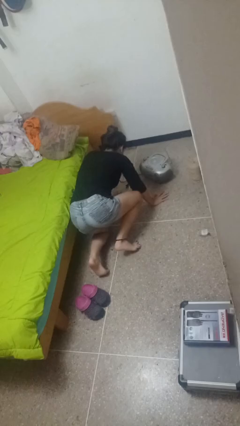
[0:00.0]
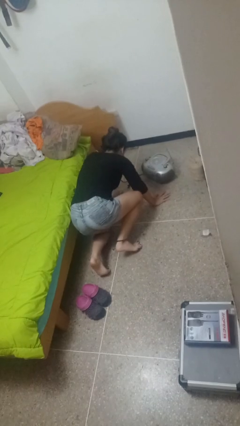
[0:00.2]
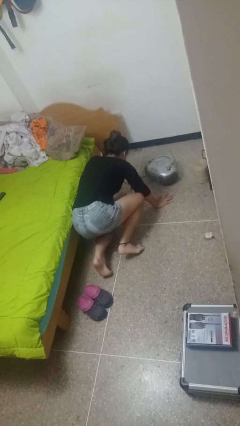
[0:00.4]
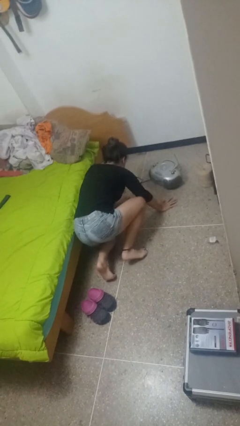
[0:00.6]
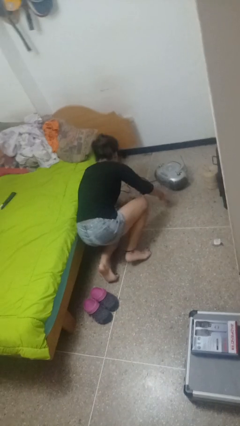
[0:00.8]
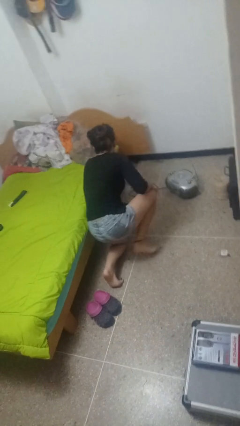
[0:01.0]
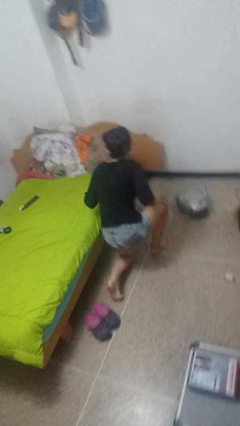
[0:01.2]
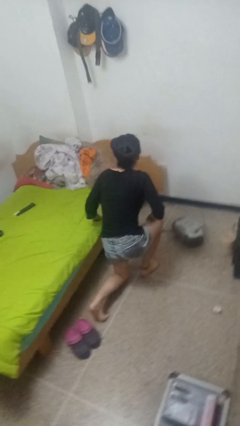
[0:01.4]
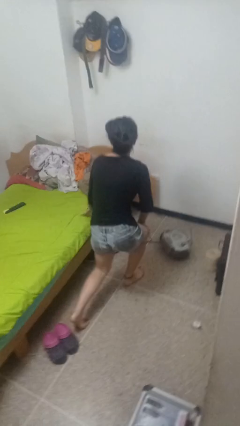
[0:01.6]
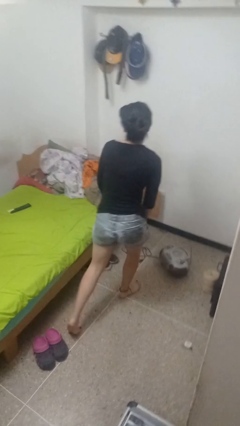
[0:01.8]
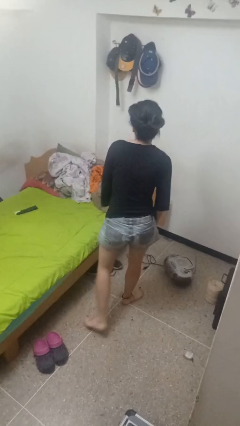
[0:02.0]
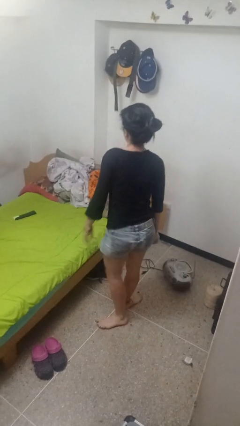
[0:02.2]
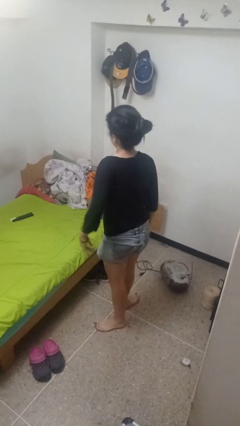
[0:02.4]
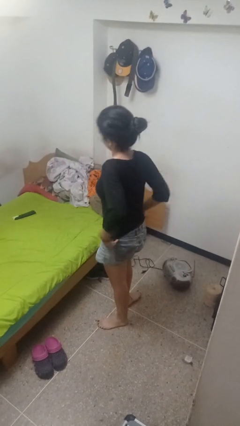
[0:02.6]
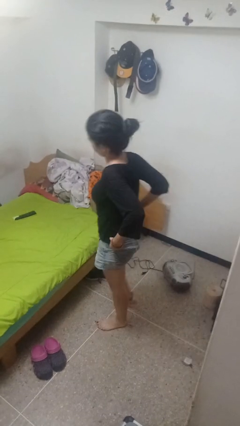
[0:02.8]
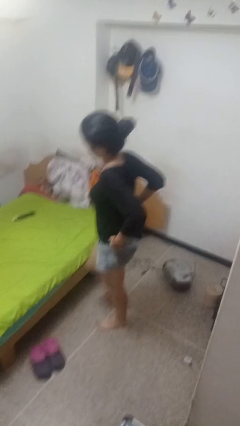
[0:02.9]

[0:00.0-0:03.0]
person stands up from floor

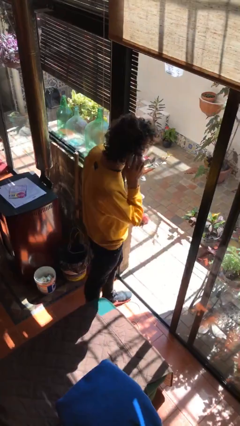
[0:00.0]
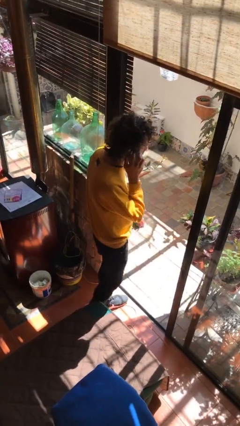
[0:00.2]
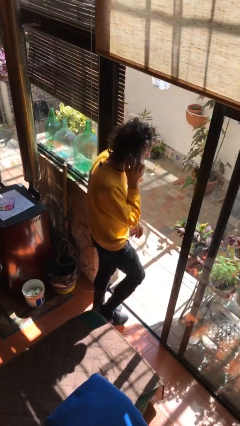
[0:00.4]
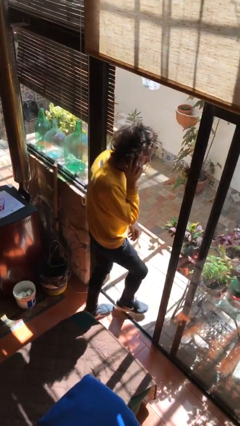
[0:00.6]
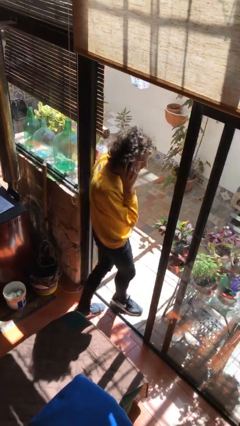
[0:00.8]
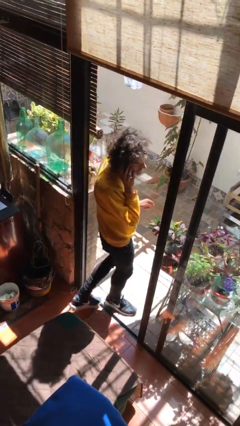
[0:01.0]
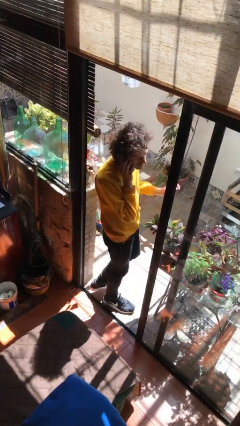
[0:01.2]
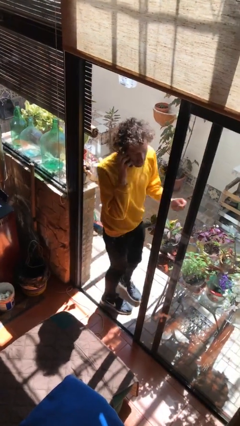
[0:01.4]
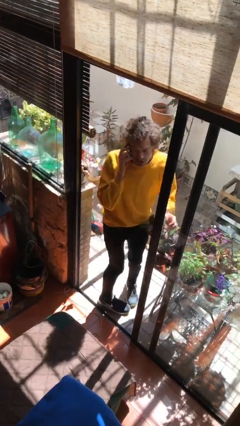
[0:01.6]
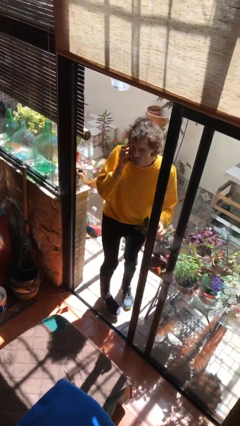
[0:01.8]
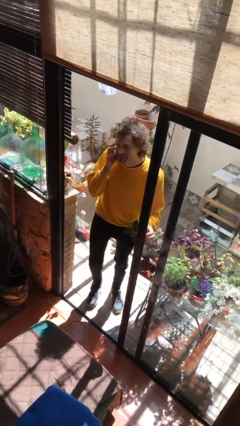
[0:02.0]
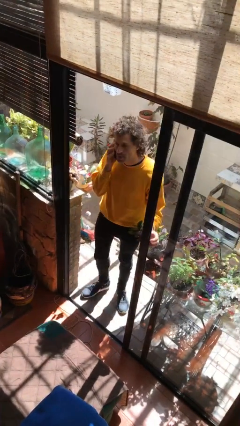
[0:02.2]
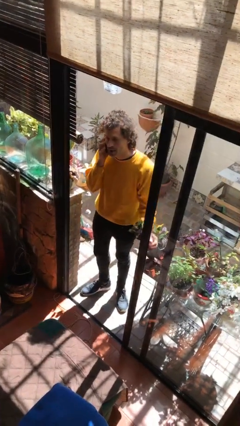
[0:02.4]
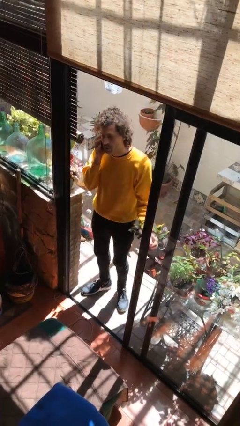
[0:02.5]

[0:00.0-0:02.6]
person exits scene through structure

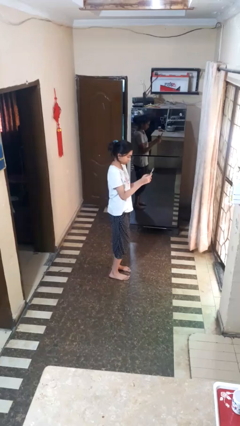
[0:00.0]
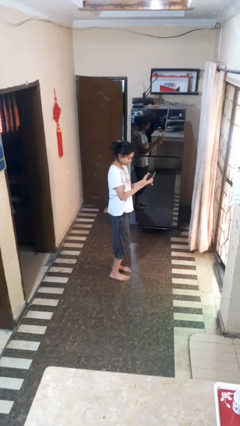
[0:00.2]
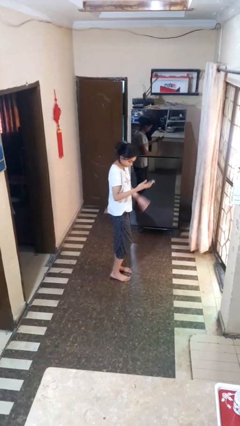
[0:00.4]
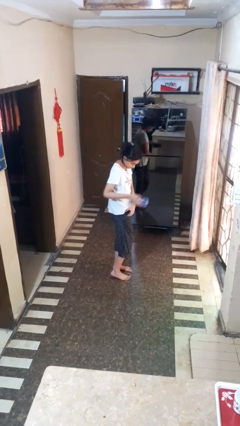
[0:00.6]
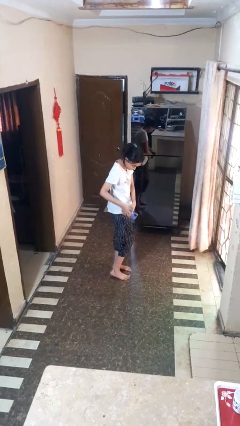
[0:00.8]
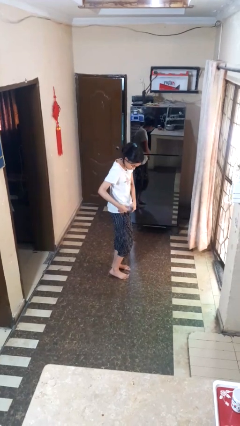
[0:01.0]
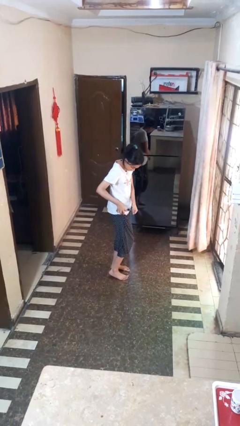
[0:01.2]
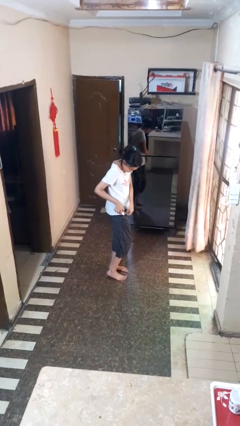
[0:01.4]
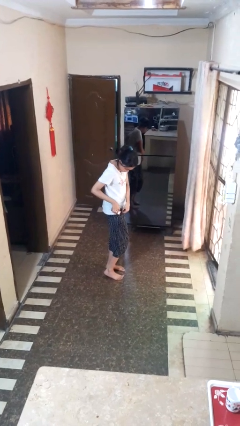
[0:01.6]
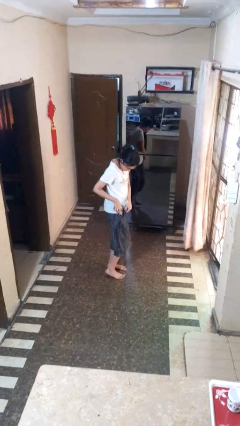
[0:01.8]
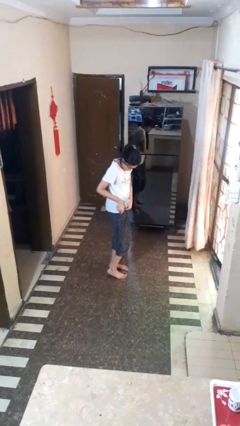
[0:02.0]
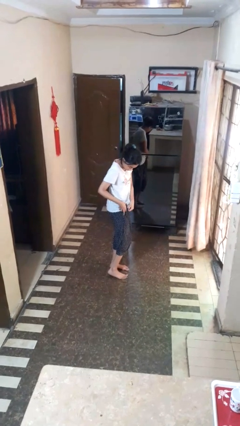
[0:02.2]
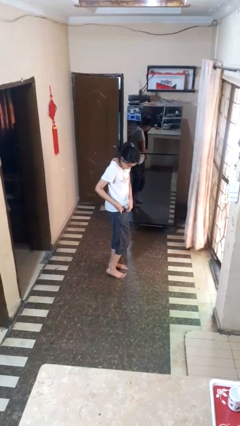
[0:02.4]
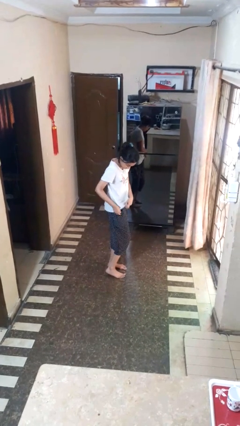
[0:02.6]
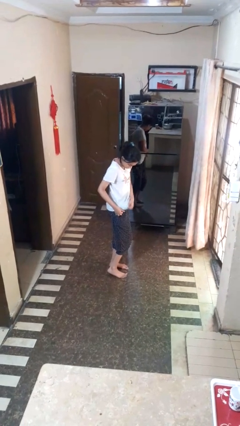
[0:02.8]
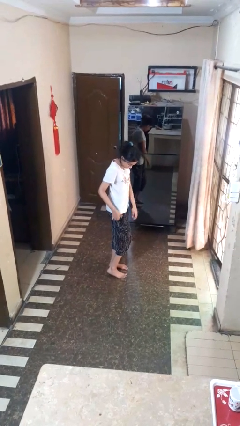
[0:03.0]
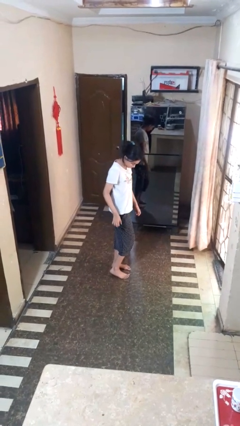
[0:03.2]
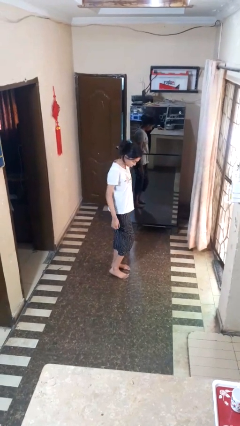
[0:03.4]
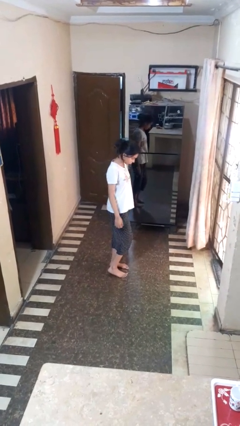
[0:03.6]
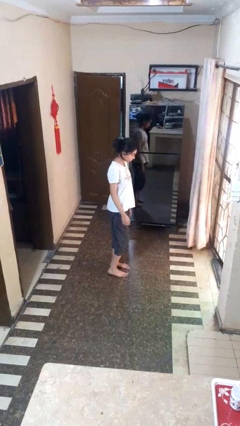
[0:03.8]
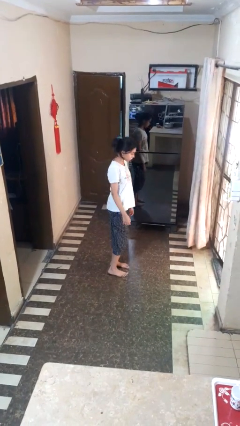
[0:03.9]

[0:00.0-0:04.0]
person puts phone into pocket

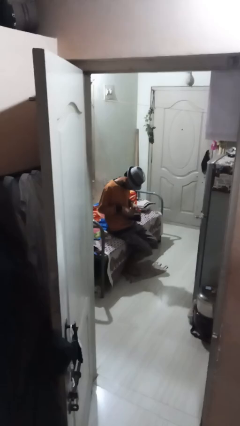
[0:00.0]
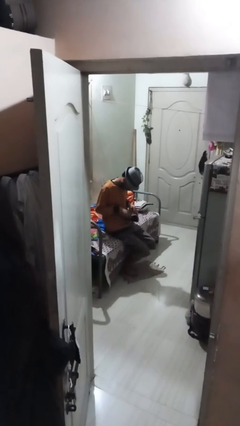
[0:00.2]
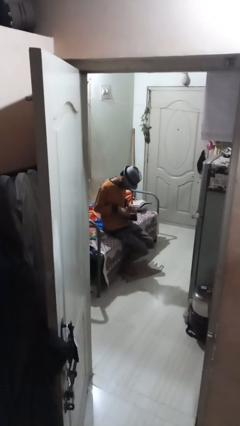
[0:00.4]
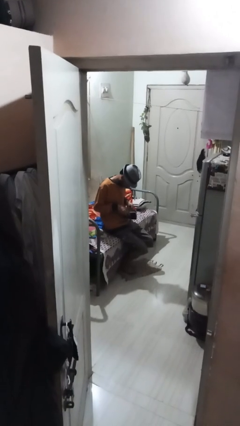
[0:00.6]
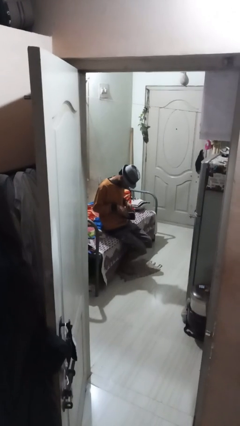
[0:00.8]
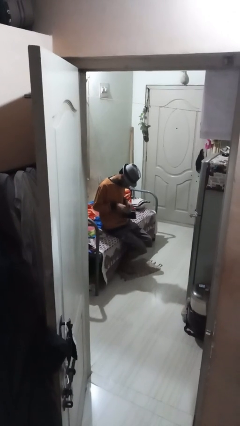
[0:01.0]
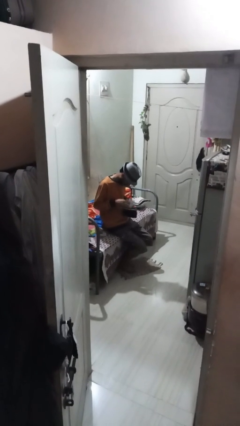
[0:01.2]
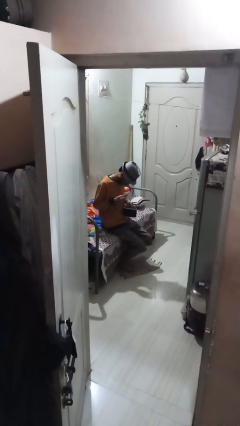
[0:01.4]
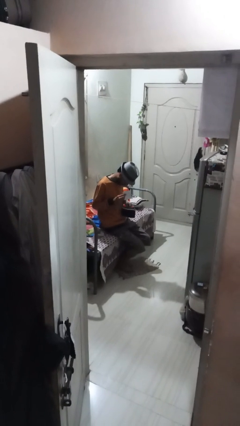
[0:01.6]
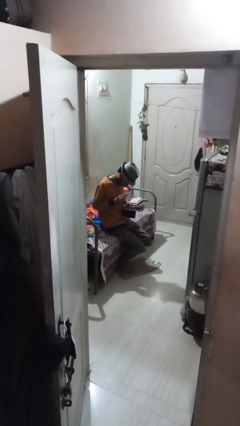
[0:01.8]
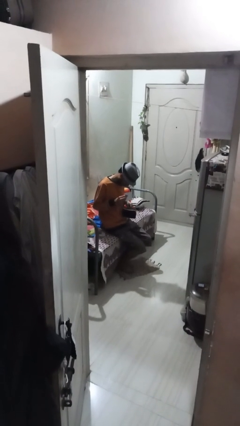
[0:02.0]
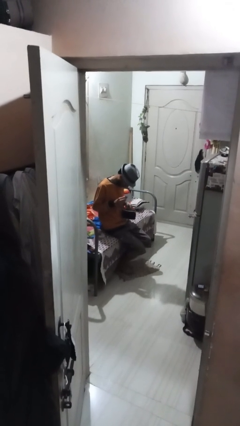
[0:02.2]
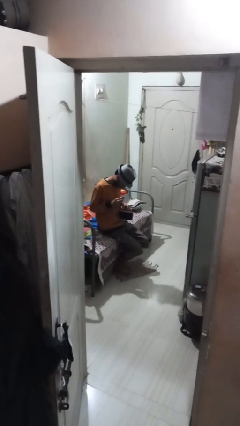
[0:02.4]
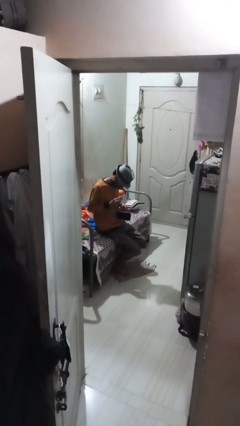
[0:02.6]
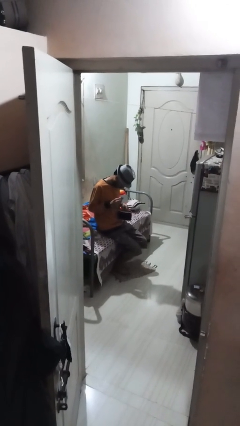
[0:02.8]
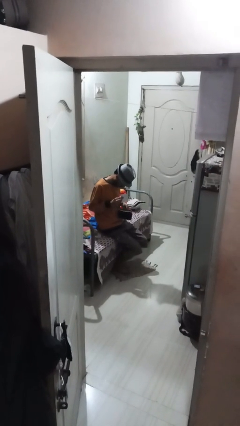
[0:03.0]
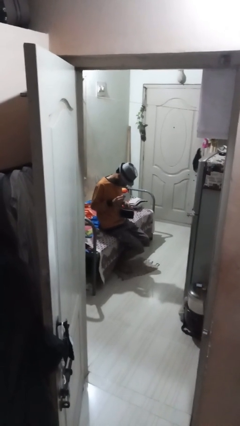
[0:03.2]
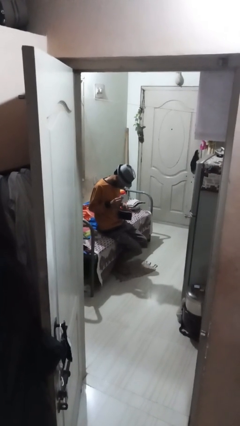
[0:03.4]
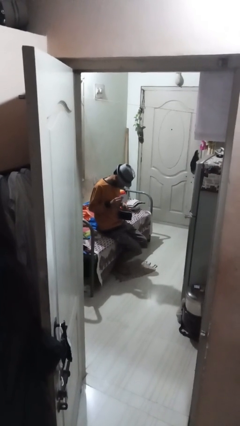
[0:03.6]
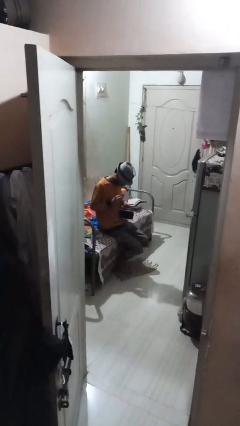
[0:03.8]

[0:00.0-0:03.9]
person takes object from purse

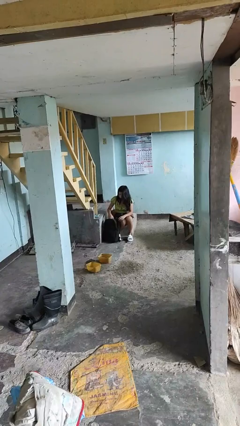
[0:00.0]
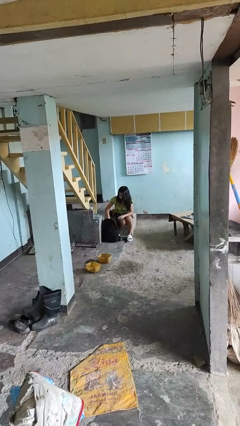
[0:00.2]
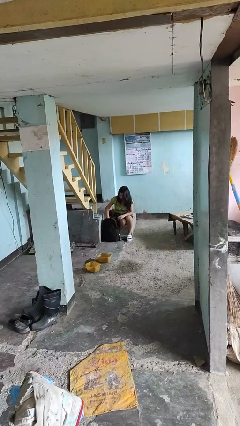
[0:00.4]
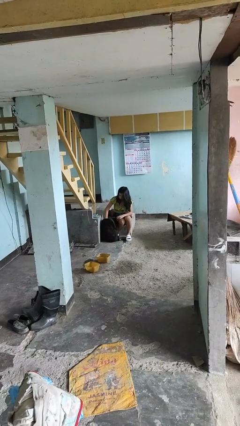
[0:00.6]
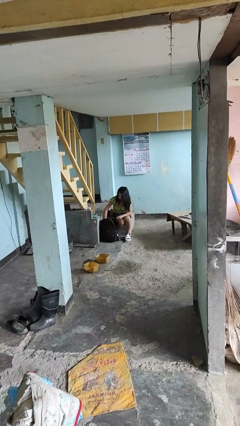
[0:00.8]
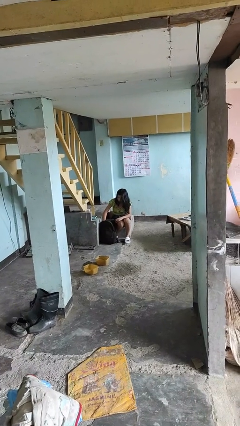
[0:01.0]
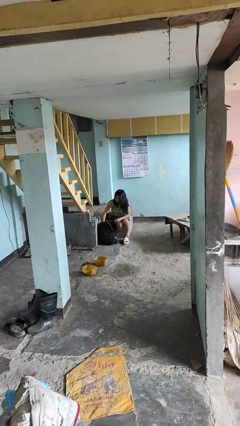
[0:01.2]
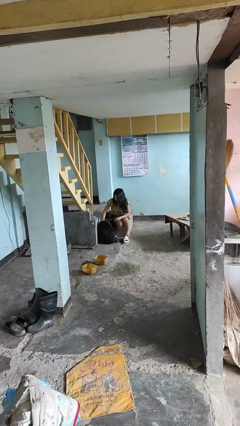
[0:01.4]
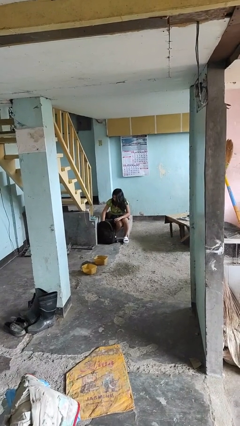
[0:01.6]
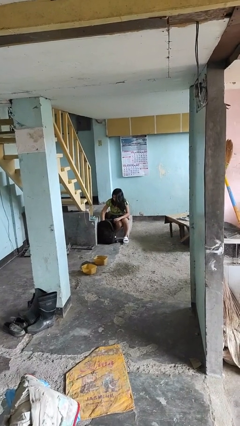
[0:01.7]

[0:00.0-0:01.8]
person searches in backpack

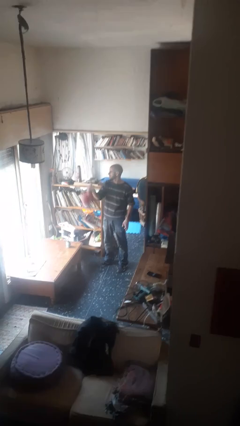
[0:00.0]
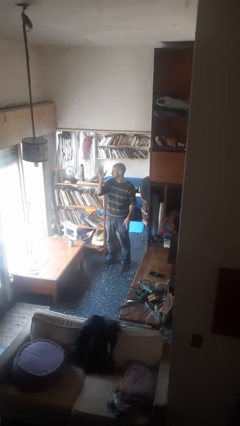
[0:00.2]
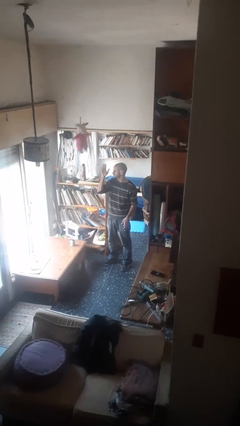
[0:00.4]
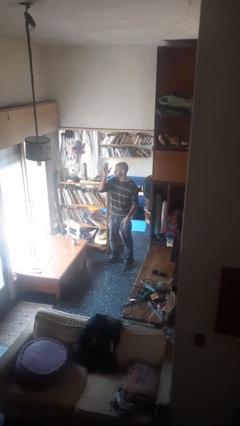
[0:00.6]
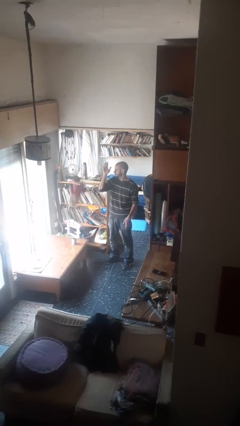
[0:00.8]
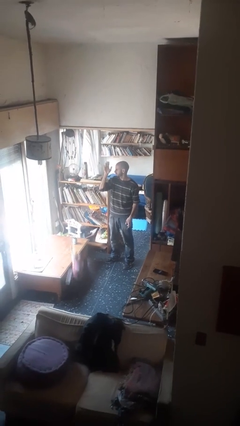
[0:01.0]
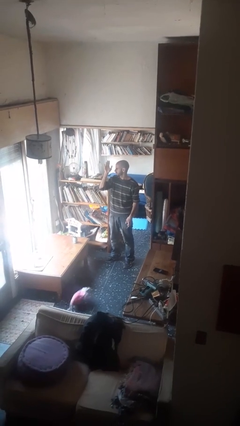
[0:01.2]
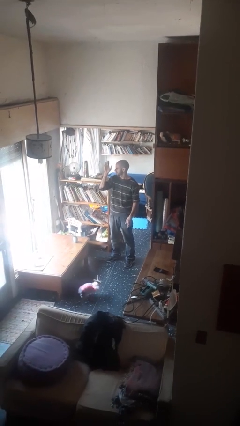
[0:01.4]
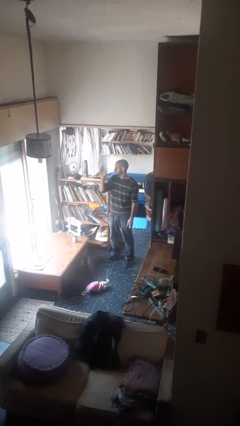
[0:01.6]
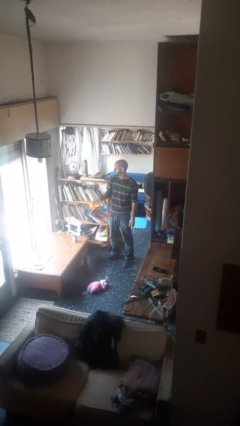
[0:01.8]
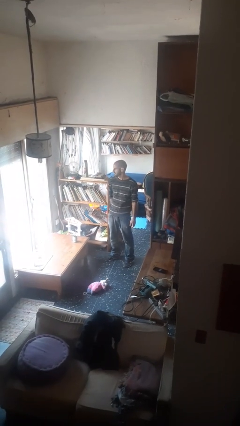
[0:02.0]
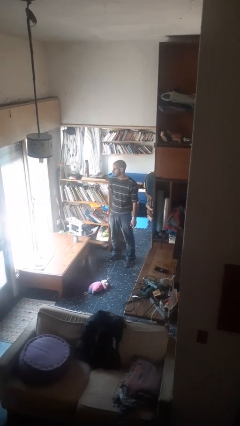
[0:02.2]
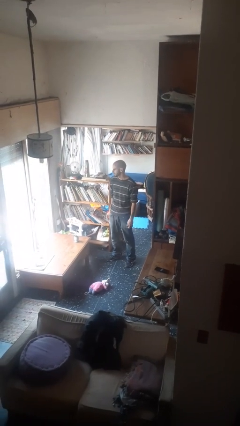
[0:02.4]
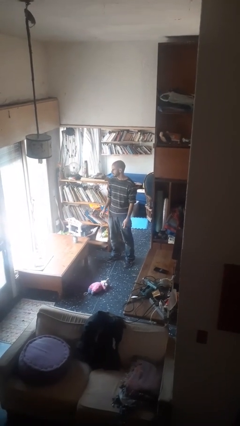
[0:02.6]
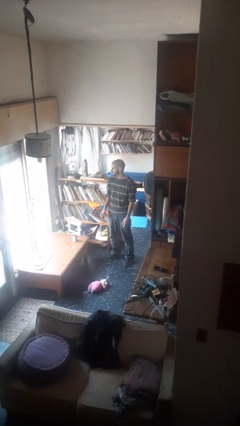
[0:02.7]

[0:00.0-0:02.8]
person throws object into air
